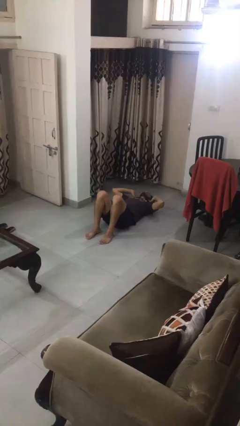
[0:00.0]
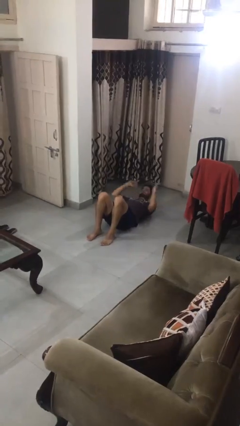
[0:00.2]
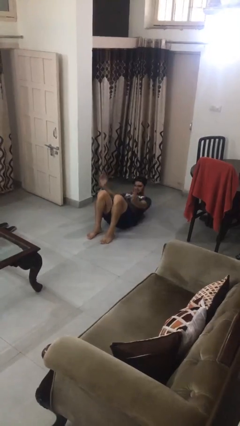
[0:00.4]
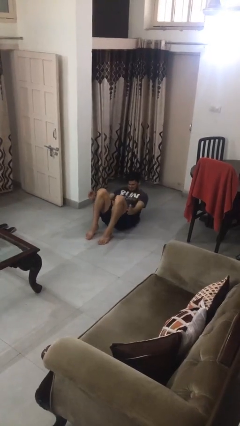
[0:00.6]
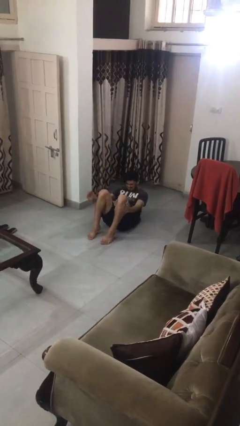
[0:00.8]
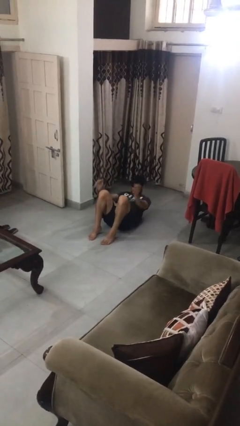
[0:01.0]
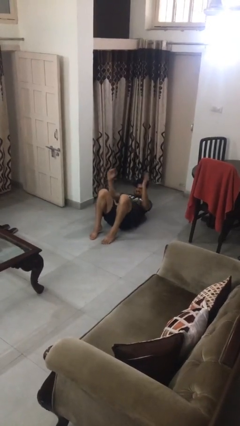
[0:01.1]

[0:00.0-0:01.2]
person exercises with situp

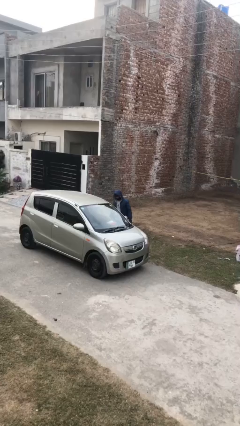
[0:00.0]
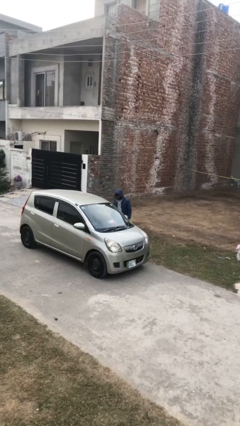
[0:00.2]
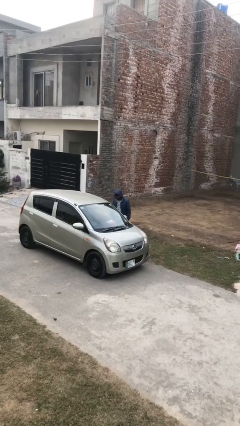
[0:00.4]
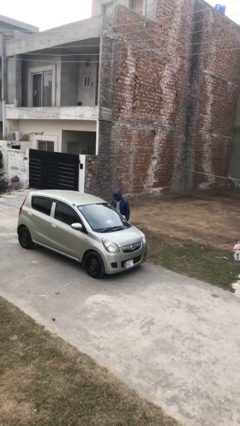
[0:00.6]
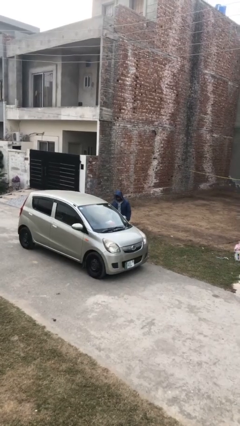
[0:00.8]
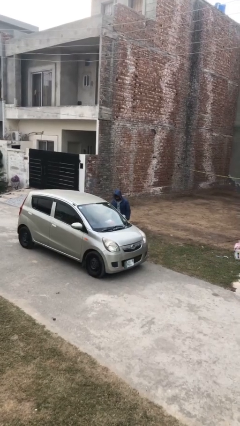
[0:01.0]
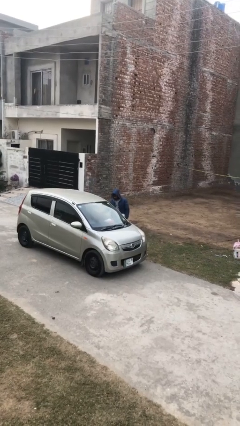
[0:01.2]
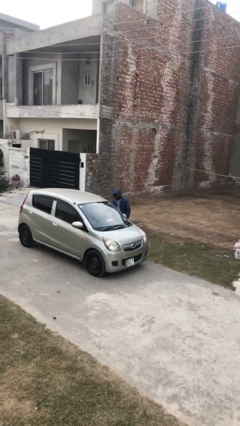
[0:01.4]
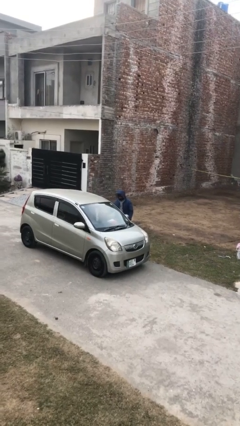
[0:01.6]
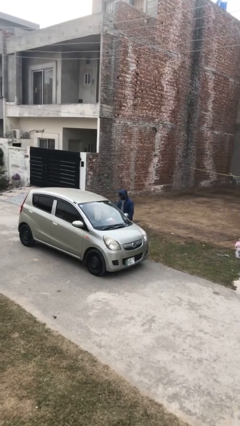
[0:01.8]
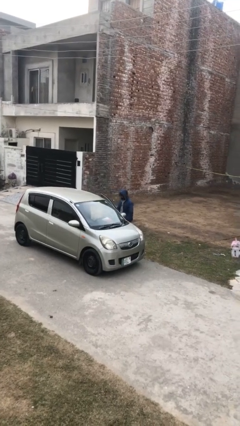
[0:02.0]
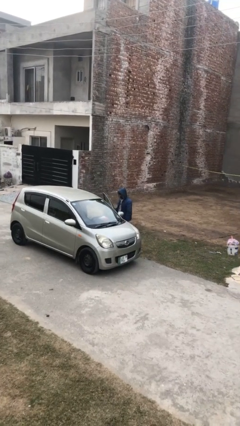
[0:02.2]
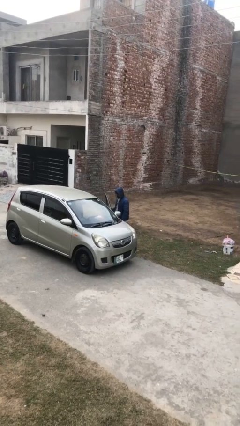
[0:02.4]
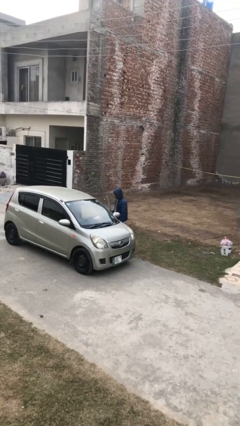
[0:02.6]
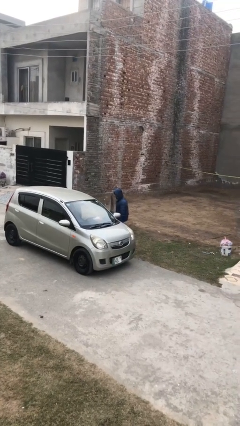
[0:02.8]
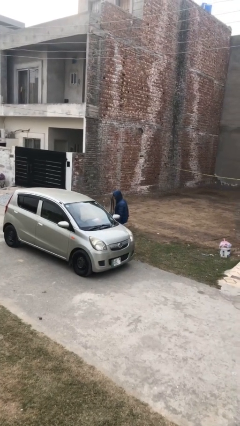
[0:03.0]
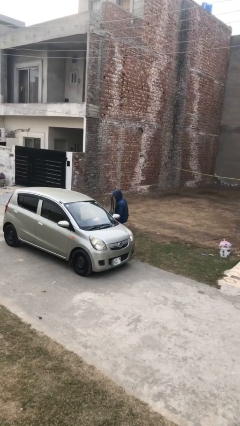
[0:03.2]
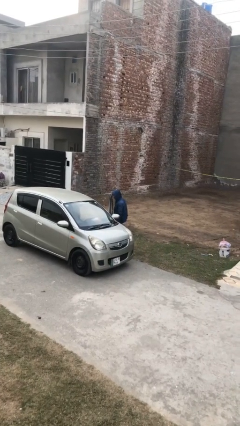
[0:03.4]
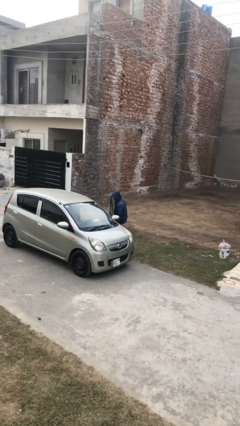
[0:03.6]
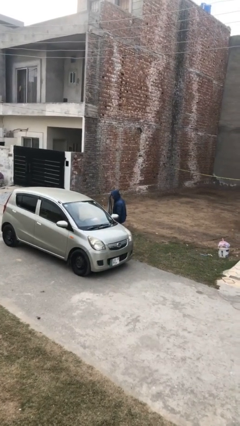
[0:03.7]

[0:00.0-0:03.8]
person opens car door

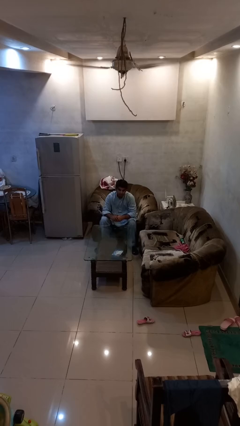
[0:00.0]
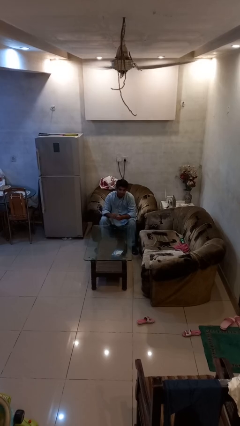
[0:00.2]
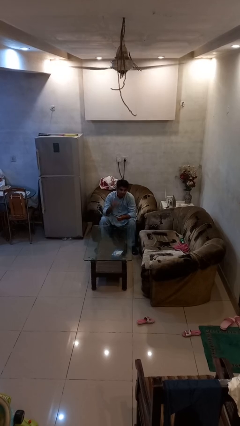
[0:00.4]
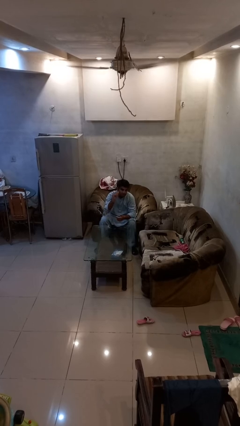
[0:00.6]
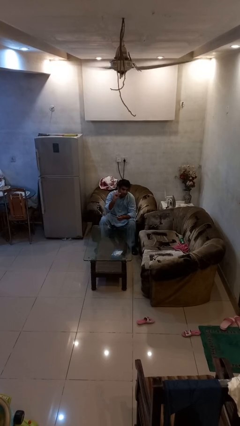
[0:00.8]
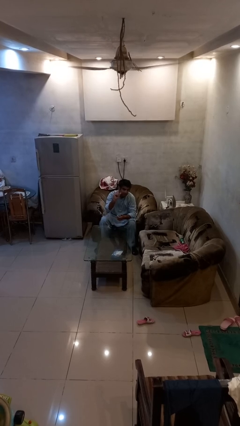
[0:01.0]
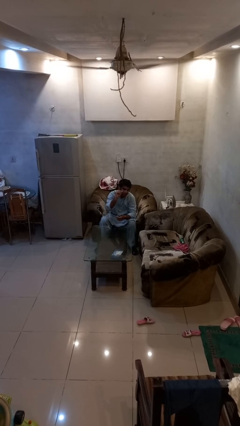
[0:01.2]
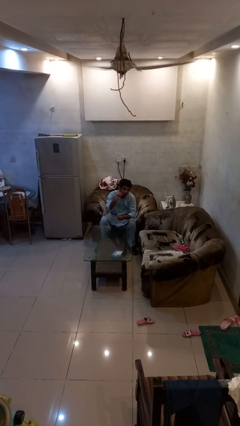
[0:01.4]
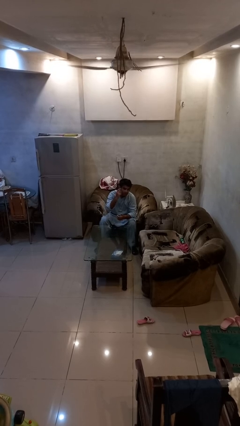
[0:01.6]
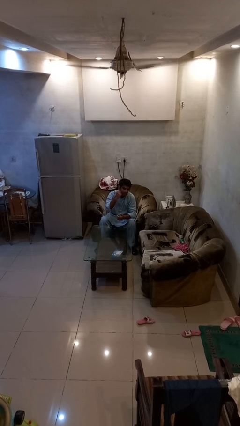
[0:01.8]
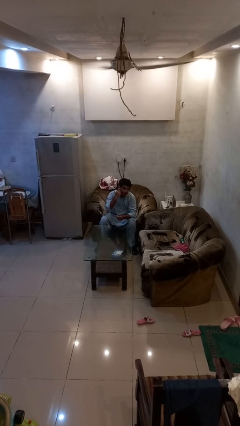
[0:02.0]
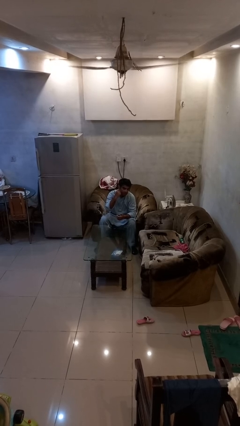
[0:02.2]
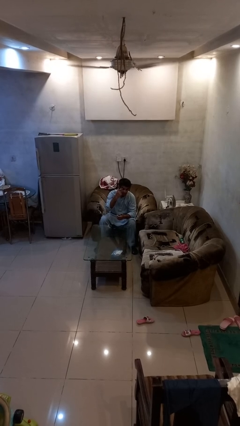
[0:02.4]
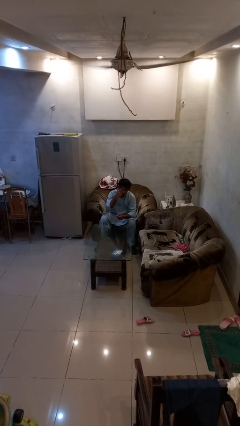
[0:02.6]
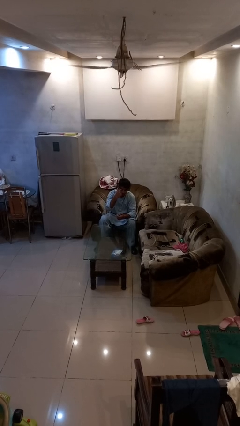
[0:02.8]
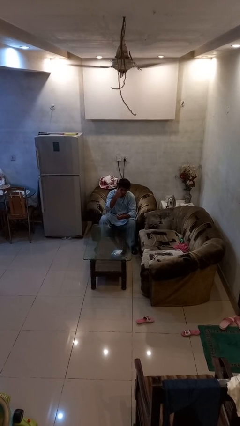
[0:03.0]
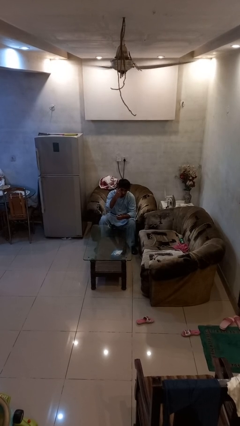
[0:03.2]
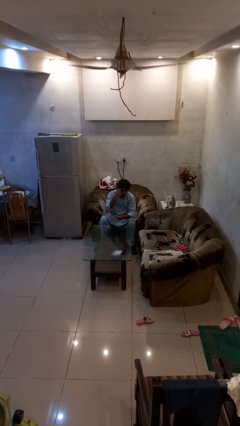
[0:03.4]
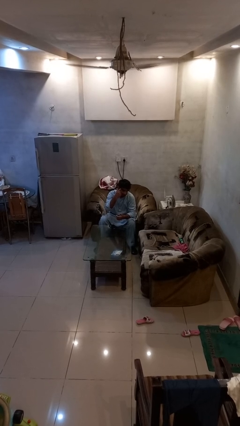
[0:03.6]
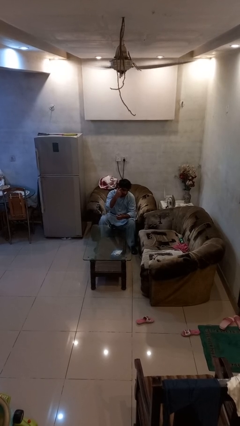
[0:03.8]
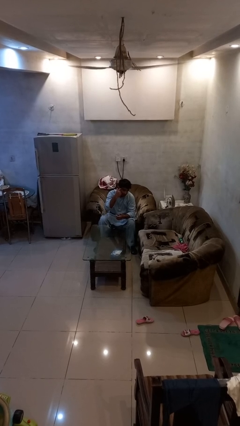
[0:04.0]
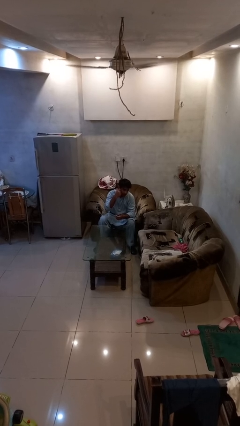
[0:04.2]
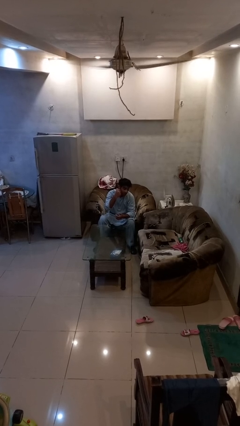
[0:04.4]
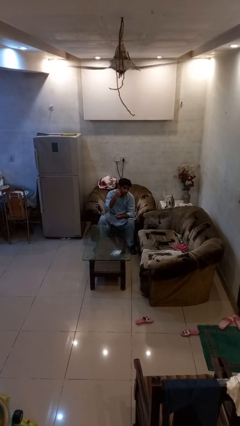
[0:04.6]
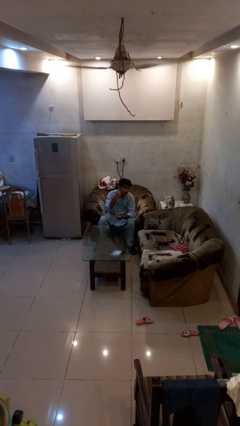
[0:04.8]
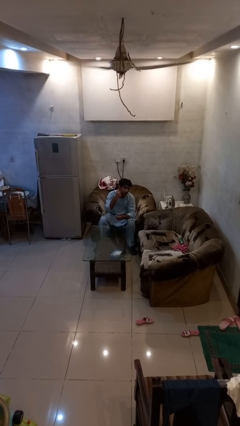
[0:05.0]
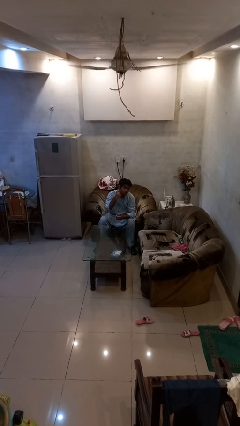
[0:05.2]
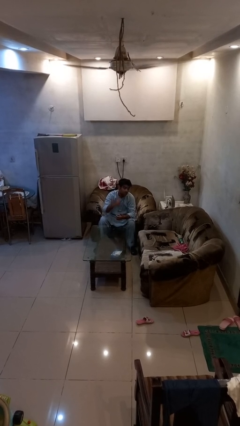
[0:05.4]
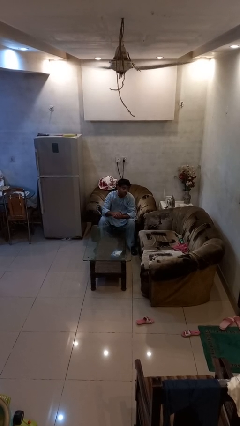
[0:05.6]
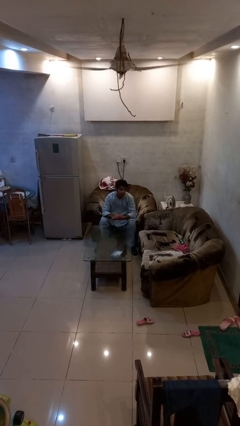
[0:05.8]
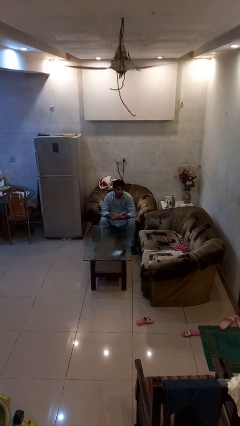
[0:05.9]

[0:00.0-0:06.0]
person scratches face

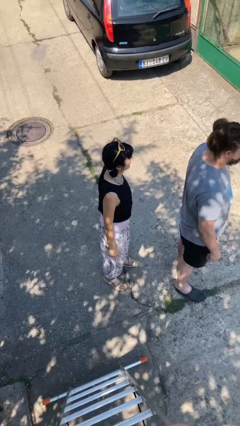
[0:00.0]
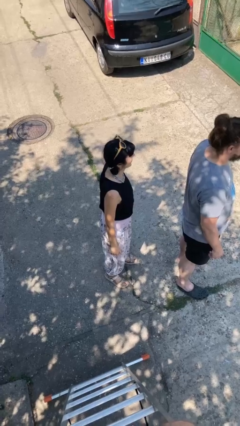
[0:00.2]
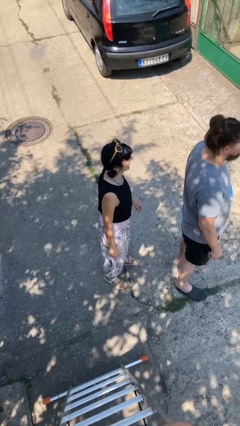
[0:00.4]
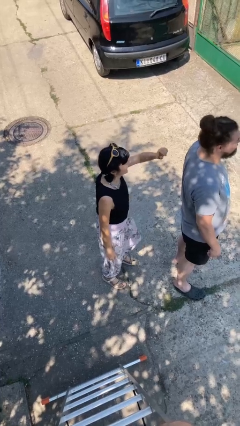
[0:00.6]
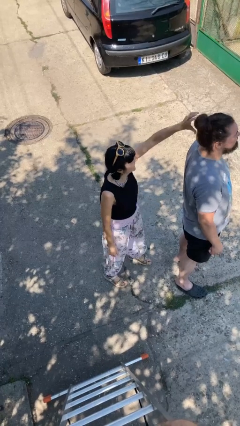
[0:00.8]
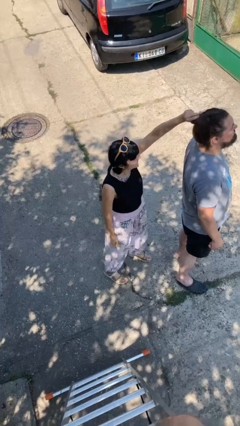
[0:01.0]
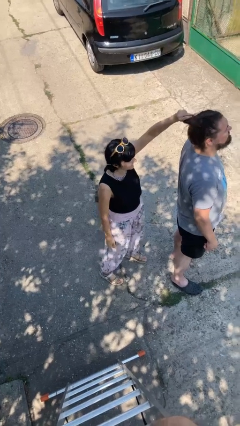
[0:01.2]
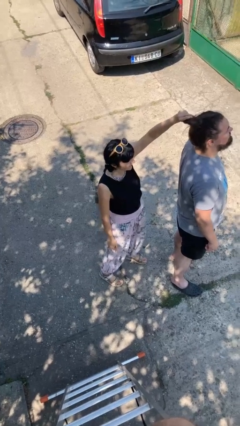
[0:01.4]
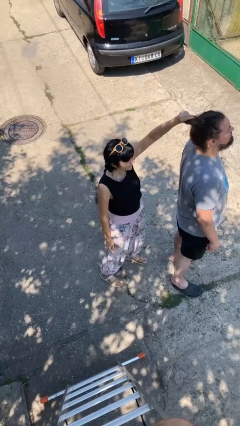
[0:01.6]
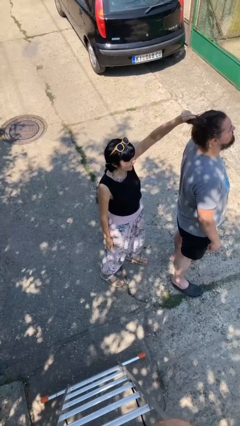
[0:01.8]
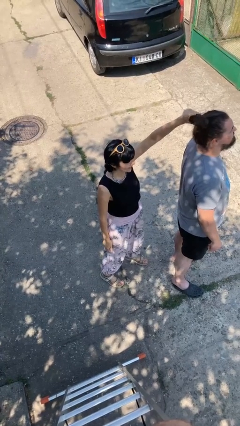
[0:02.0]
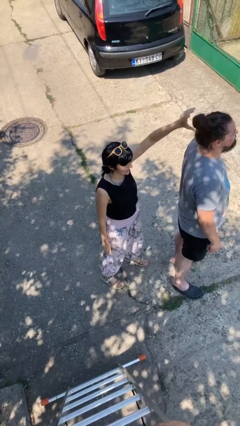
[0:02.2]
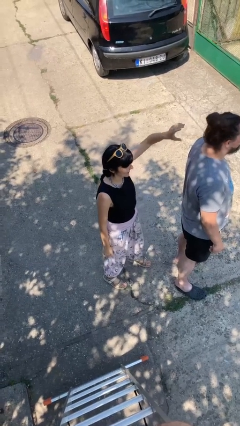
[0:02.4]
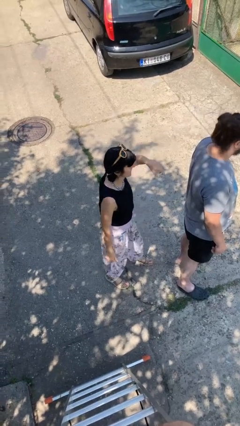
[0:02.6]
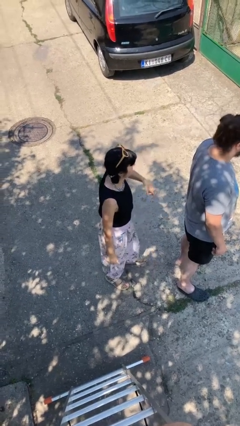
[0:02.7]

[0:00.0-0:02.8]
person grabs person by hair

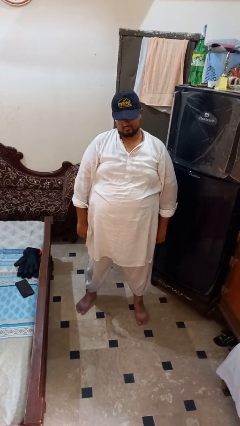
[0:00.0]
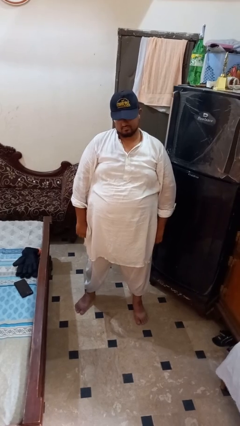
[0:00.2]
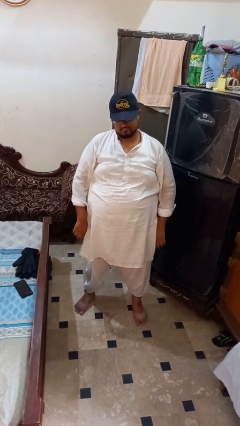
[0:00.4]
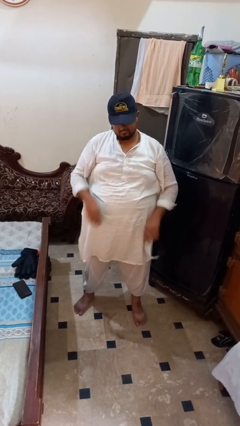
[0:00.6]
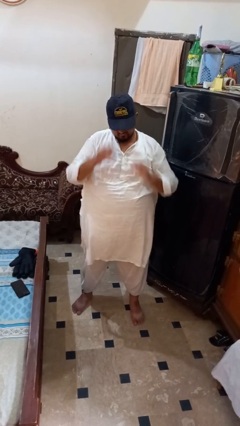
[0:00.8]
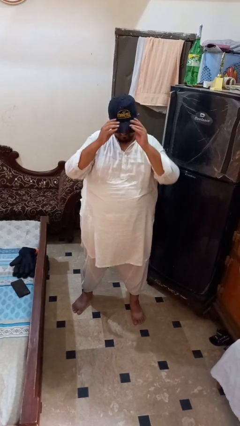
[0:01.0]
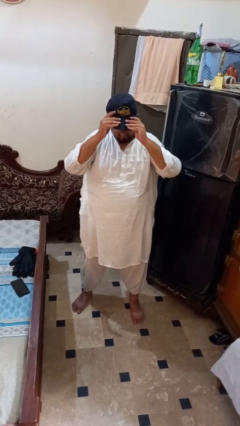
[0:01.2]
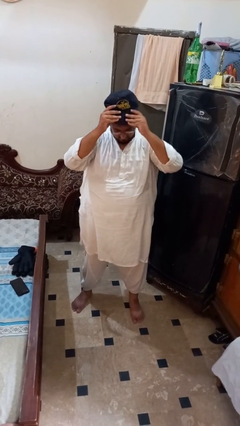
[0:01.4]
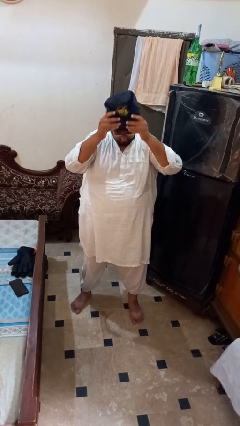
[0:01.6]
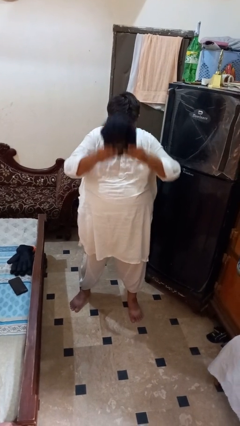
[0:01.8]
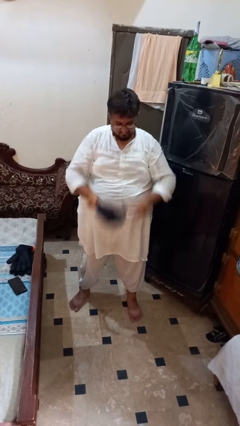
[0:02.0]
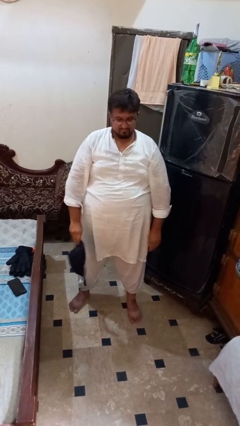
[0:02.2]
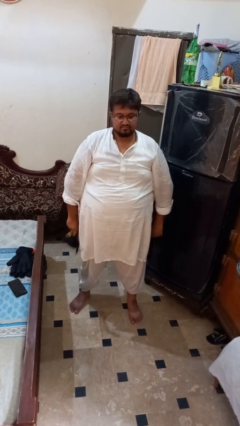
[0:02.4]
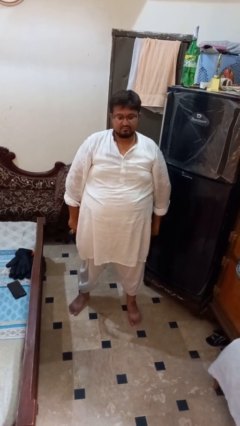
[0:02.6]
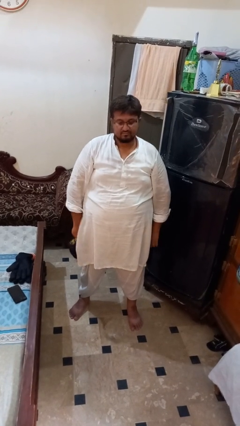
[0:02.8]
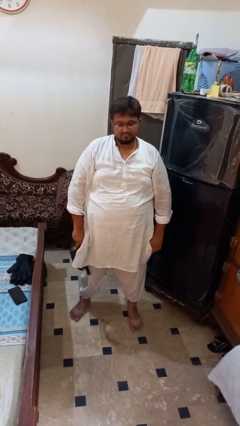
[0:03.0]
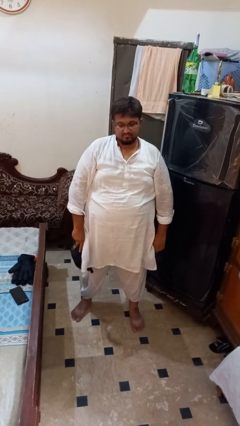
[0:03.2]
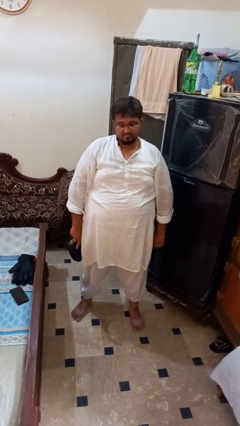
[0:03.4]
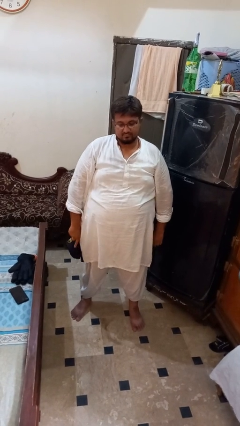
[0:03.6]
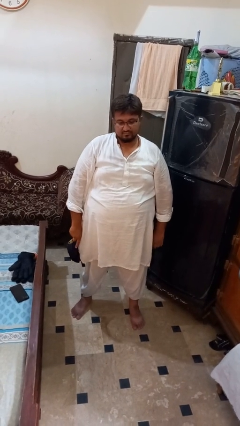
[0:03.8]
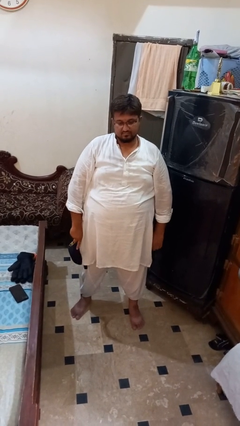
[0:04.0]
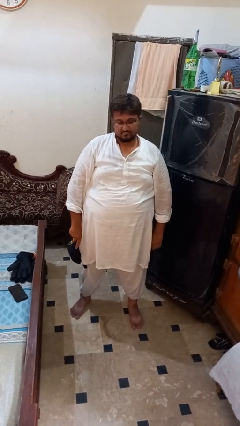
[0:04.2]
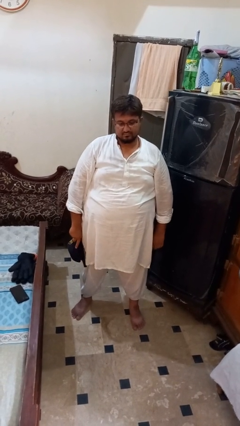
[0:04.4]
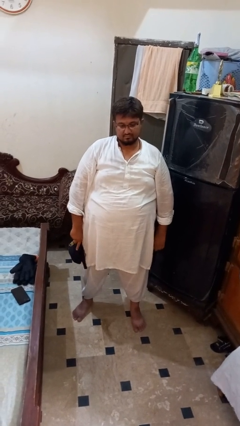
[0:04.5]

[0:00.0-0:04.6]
person takes off hat
